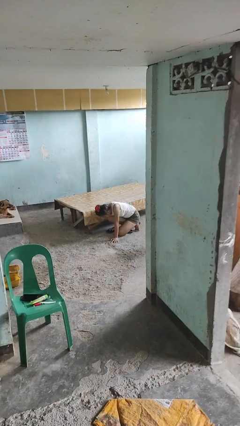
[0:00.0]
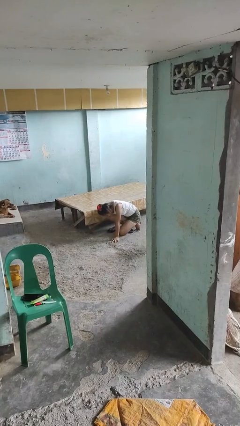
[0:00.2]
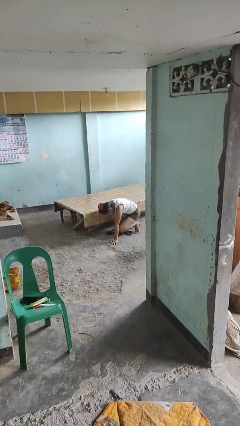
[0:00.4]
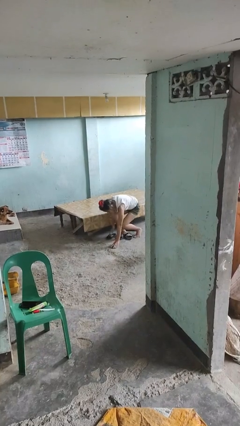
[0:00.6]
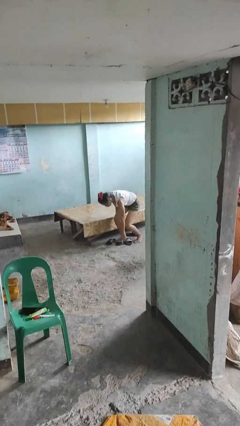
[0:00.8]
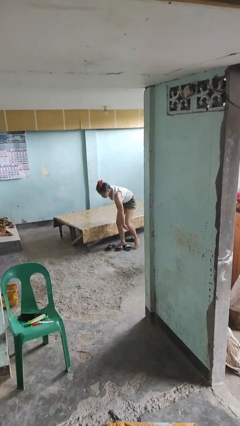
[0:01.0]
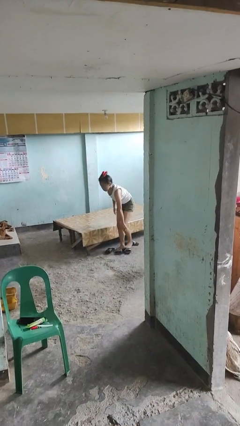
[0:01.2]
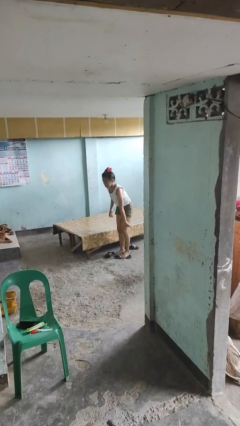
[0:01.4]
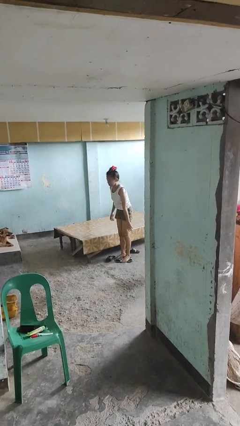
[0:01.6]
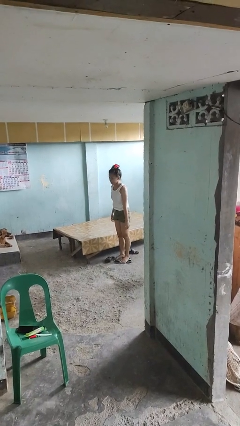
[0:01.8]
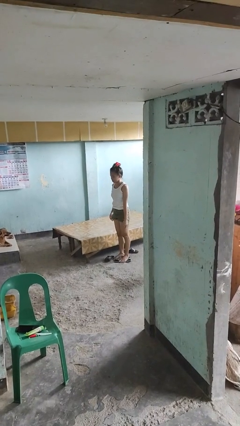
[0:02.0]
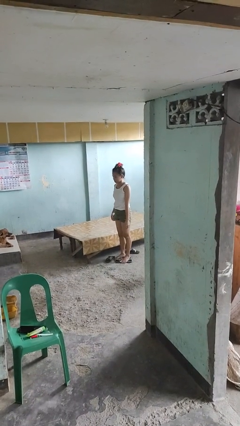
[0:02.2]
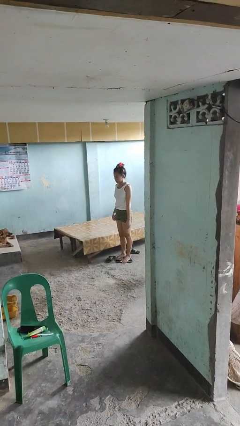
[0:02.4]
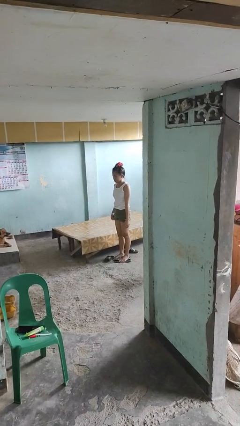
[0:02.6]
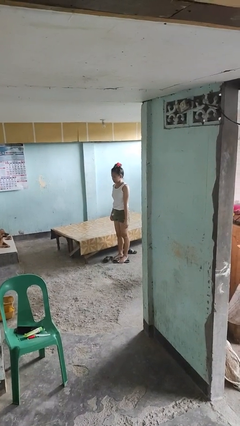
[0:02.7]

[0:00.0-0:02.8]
person stands up from floor

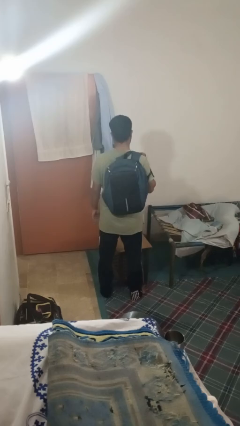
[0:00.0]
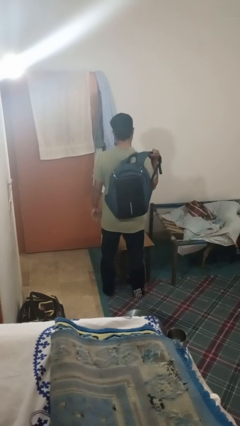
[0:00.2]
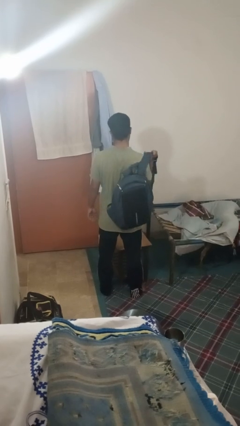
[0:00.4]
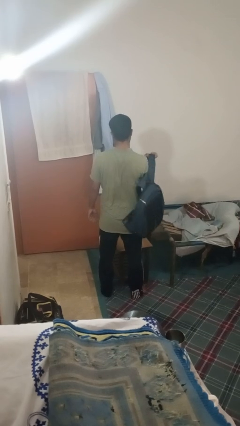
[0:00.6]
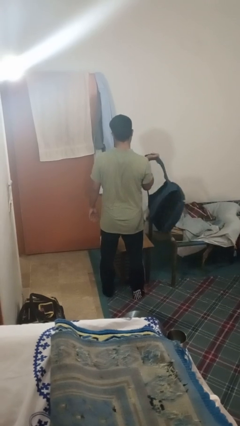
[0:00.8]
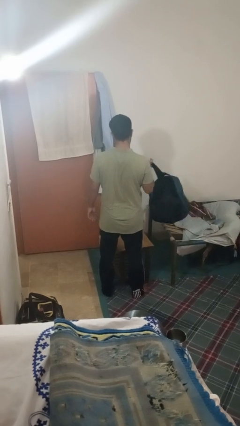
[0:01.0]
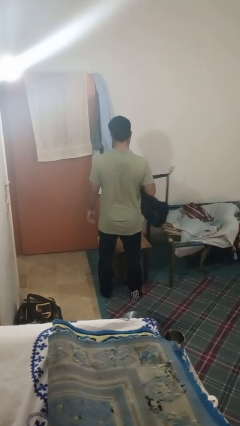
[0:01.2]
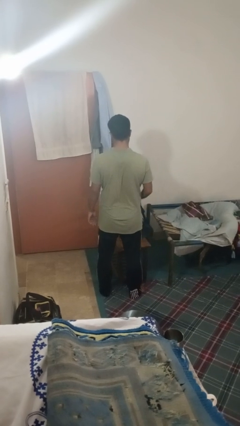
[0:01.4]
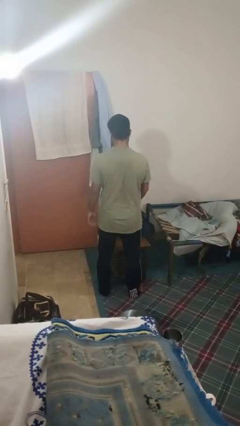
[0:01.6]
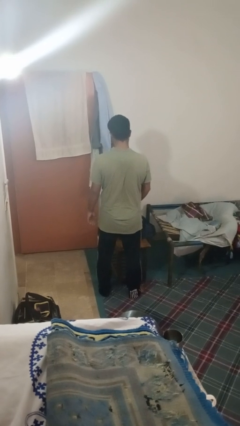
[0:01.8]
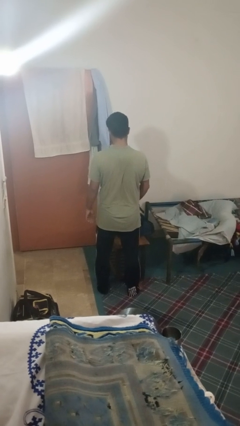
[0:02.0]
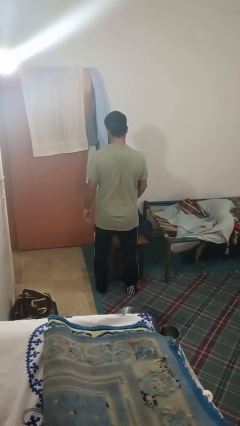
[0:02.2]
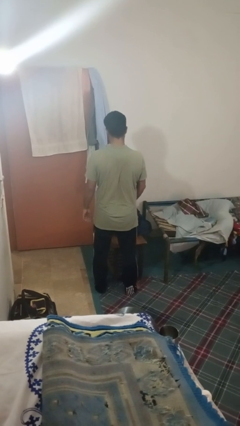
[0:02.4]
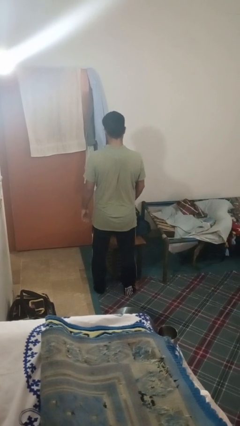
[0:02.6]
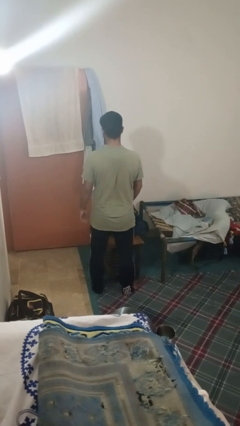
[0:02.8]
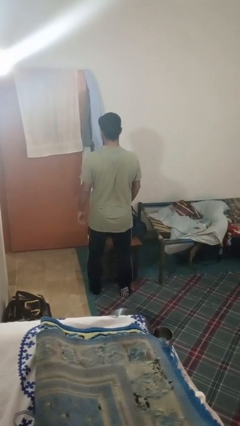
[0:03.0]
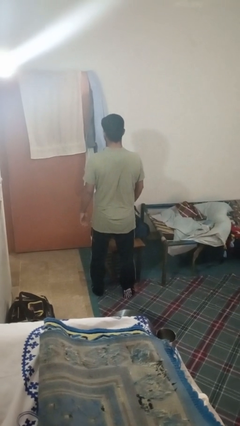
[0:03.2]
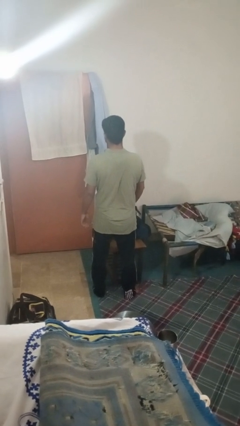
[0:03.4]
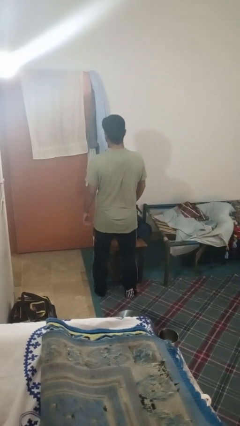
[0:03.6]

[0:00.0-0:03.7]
person takes off backpack

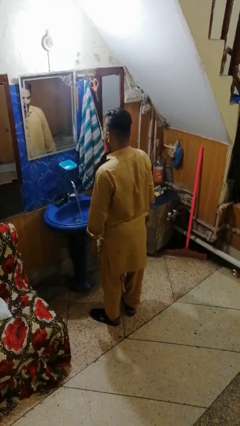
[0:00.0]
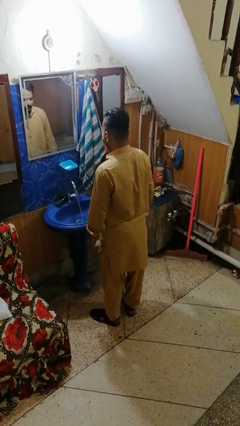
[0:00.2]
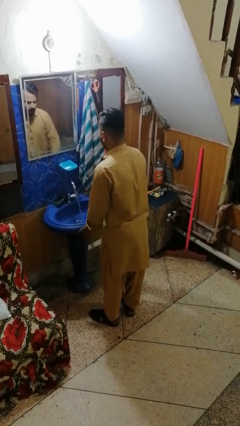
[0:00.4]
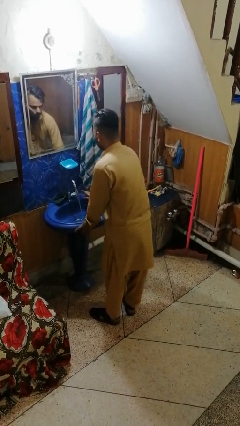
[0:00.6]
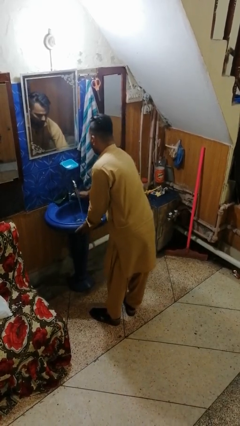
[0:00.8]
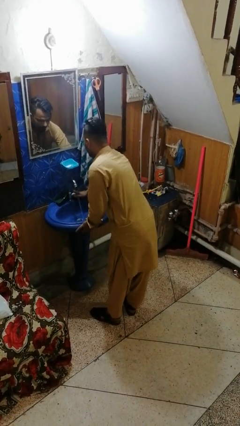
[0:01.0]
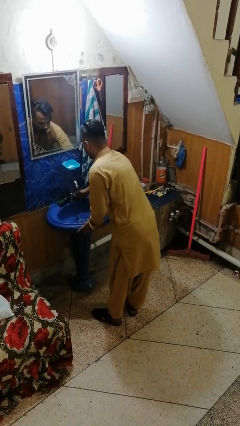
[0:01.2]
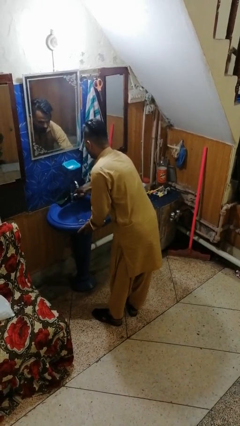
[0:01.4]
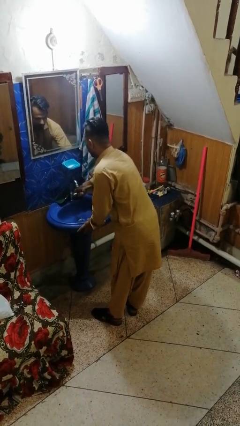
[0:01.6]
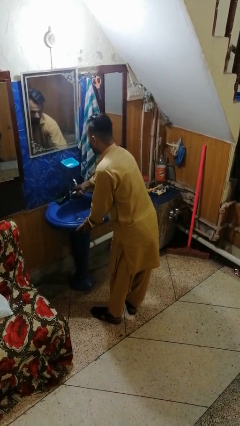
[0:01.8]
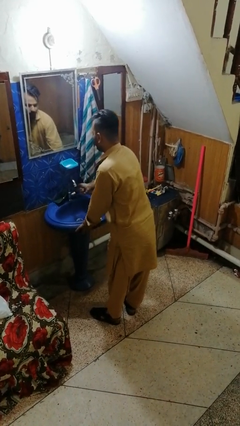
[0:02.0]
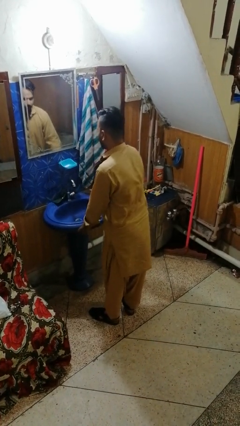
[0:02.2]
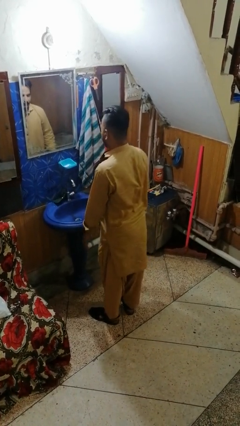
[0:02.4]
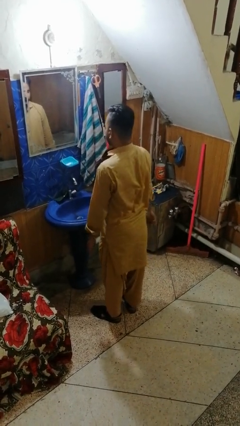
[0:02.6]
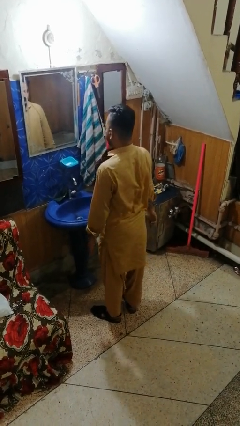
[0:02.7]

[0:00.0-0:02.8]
person turns off faucet

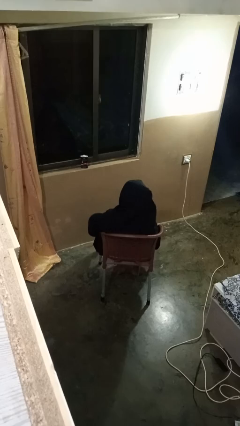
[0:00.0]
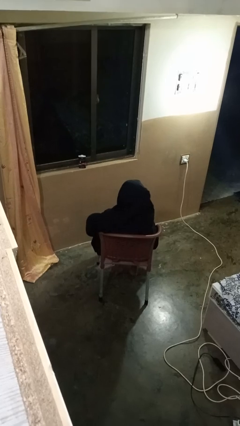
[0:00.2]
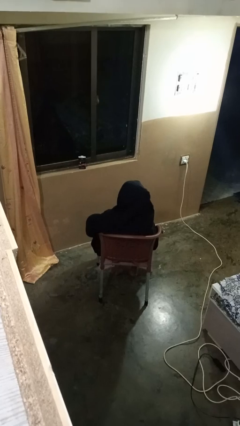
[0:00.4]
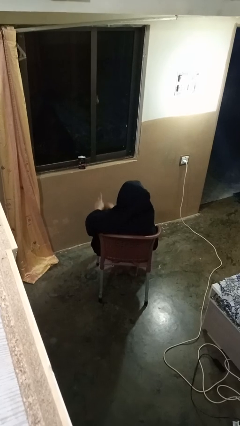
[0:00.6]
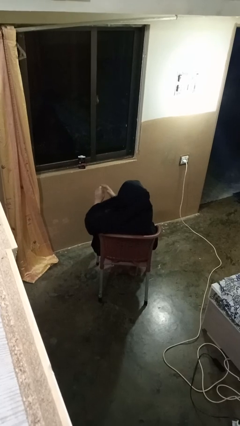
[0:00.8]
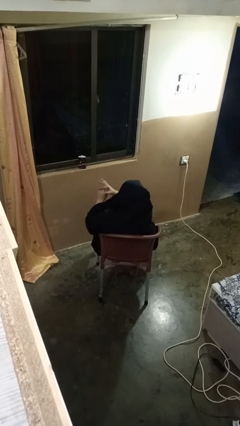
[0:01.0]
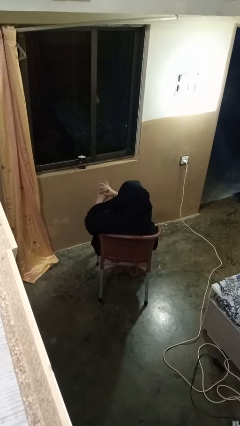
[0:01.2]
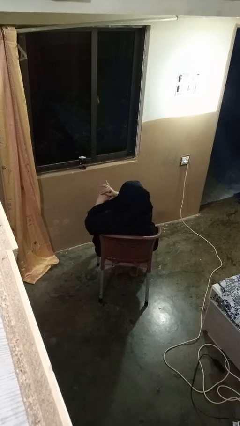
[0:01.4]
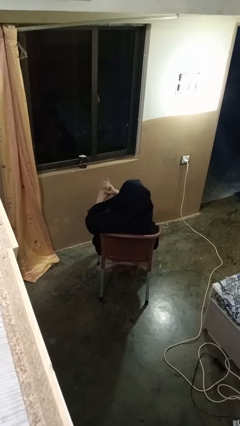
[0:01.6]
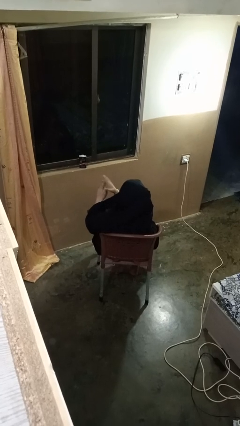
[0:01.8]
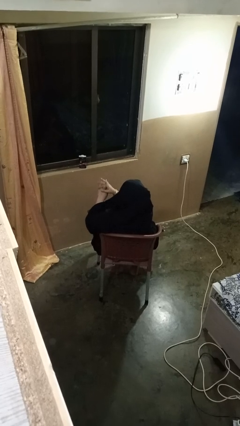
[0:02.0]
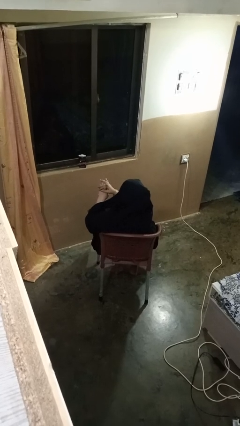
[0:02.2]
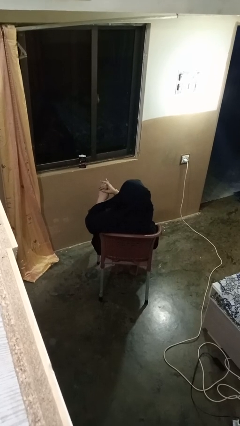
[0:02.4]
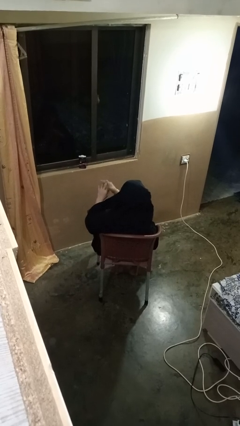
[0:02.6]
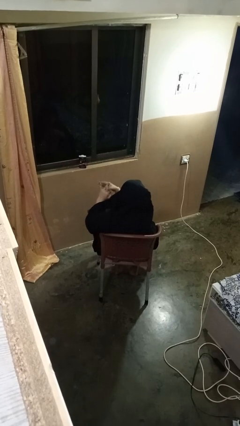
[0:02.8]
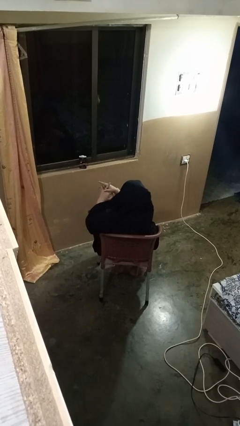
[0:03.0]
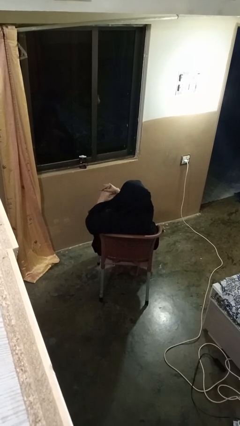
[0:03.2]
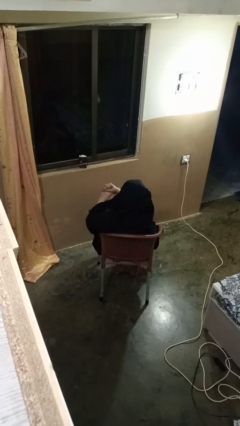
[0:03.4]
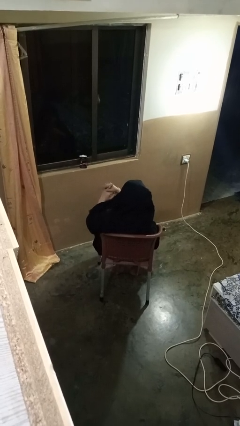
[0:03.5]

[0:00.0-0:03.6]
person cracks knuckles

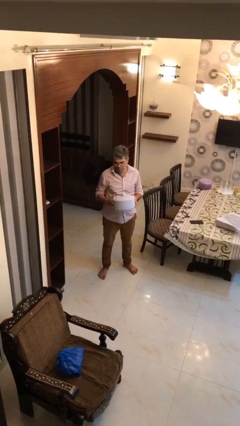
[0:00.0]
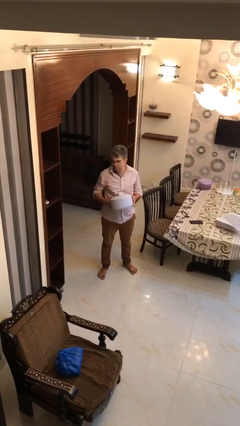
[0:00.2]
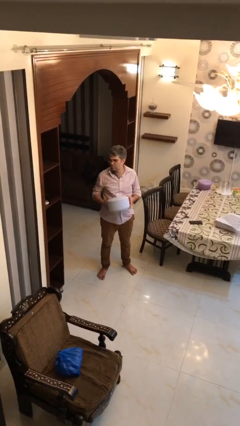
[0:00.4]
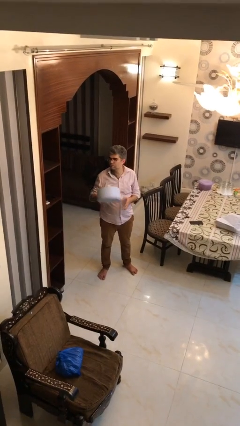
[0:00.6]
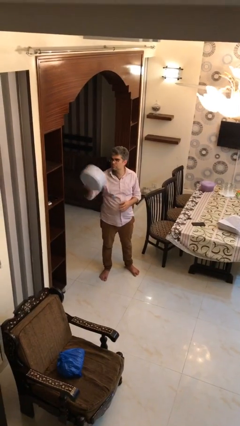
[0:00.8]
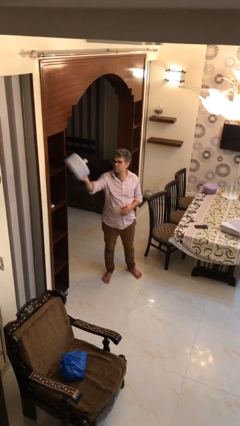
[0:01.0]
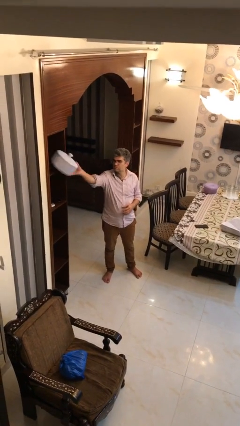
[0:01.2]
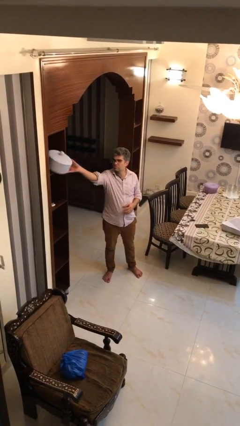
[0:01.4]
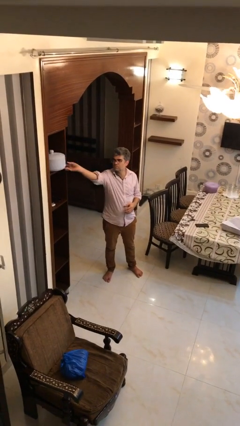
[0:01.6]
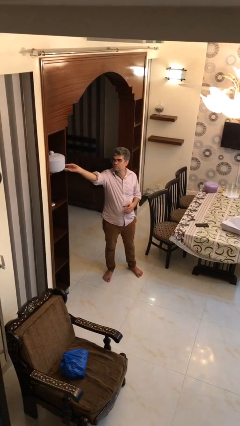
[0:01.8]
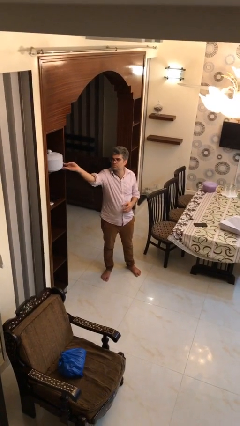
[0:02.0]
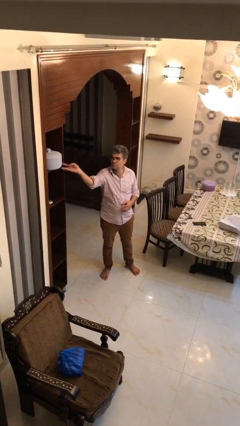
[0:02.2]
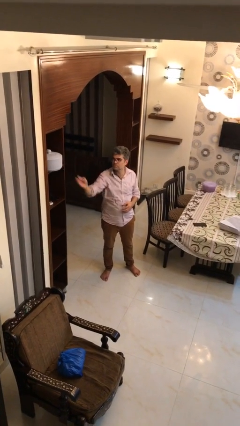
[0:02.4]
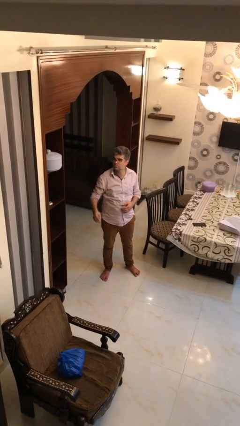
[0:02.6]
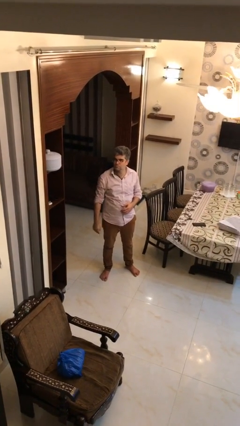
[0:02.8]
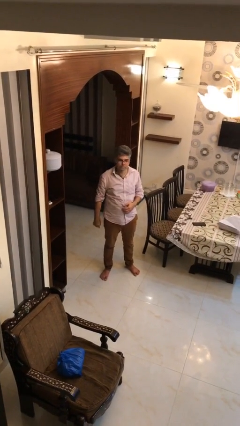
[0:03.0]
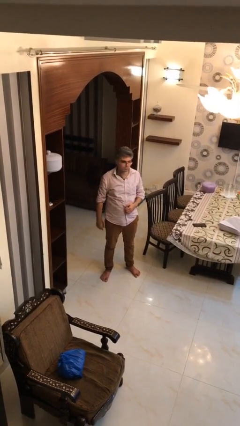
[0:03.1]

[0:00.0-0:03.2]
person puts down object on shelf

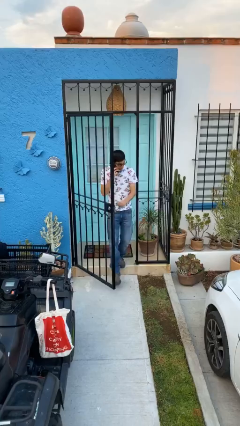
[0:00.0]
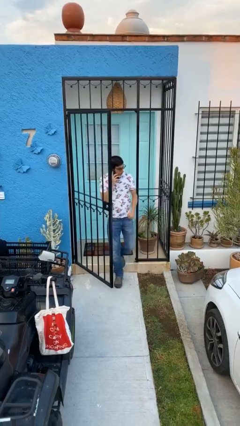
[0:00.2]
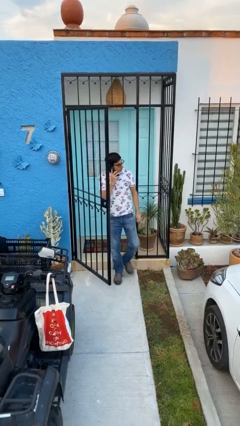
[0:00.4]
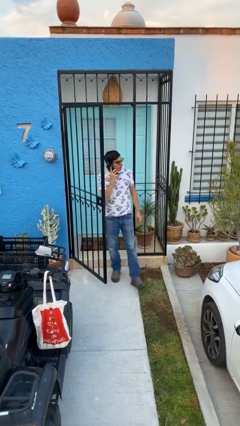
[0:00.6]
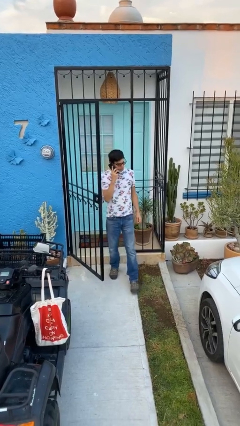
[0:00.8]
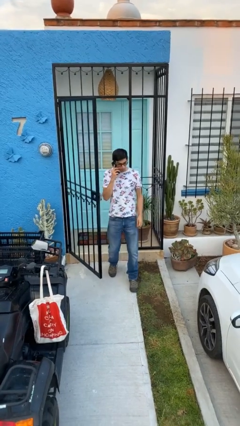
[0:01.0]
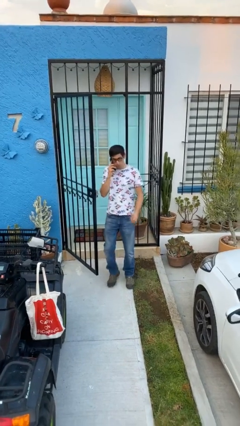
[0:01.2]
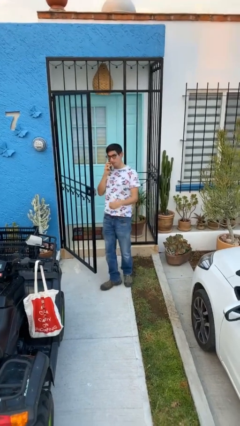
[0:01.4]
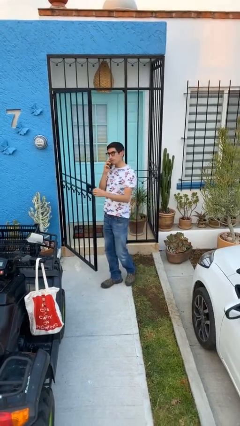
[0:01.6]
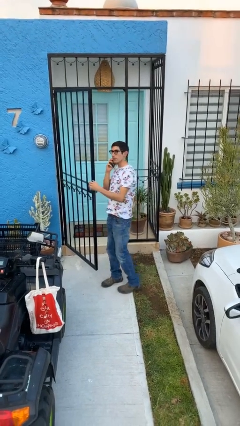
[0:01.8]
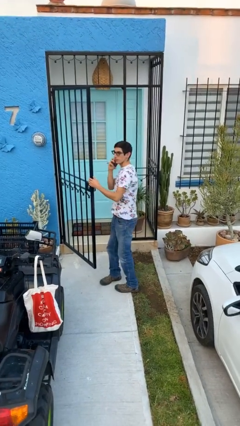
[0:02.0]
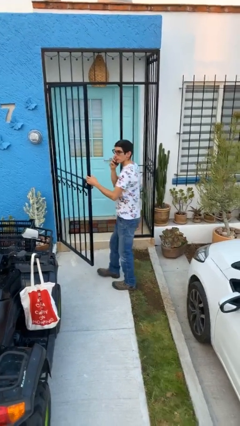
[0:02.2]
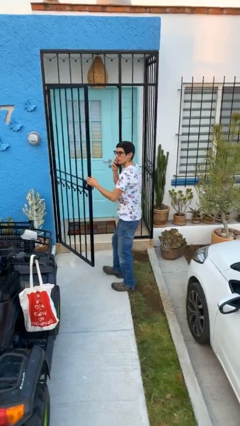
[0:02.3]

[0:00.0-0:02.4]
person enters scene through structure
